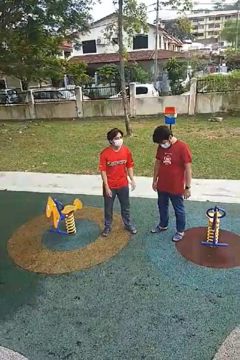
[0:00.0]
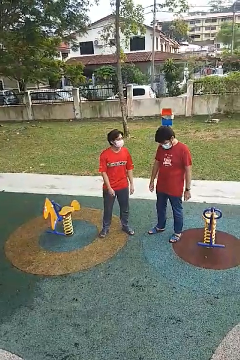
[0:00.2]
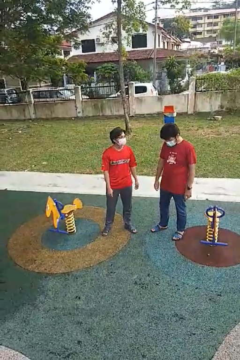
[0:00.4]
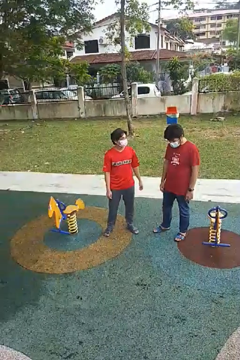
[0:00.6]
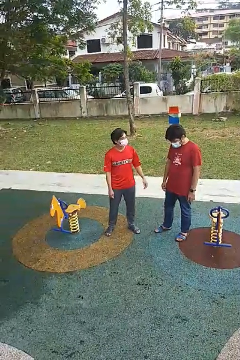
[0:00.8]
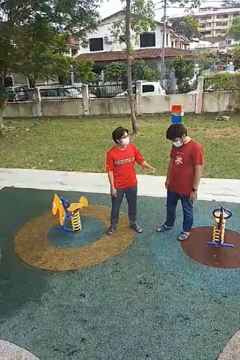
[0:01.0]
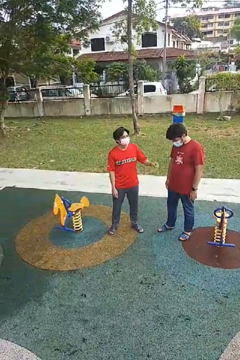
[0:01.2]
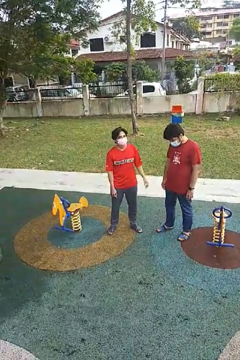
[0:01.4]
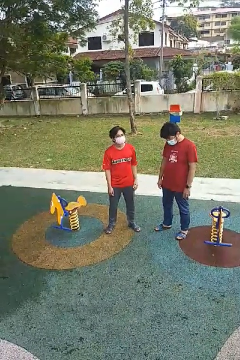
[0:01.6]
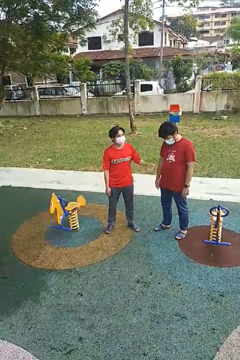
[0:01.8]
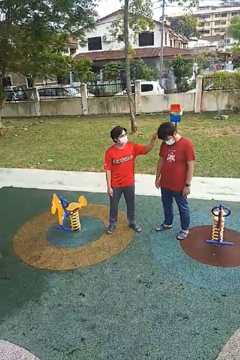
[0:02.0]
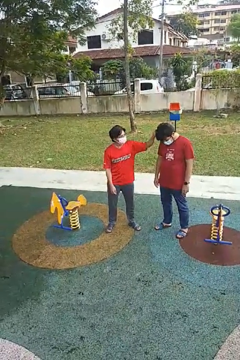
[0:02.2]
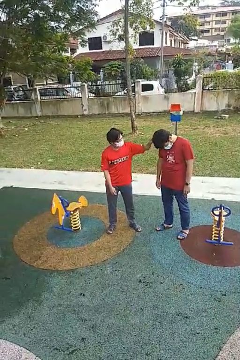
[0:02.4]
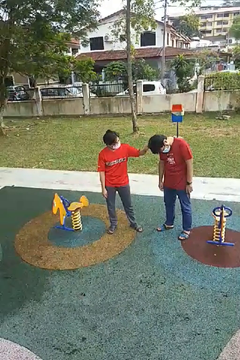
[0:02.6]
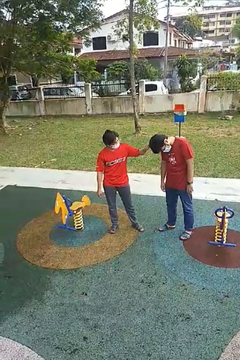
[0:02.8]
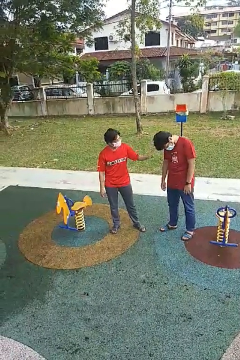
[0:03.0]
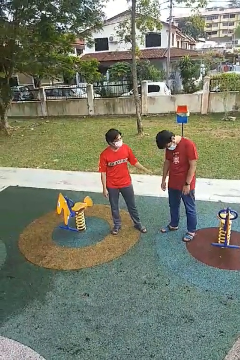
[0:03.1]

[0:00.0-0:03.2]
person grabs person by hair

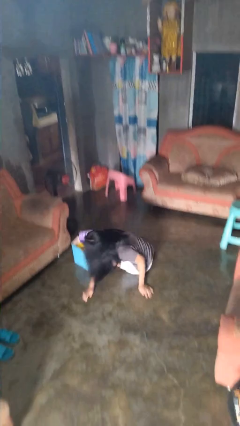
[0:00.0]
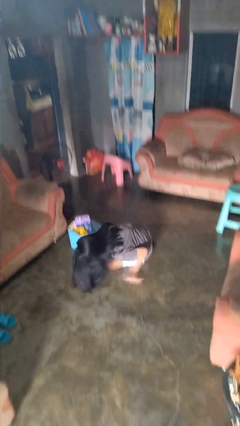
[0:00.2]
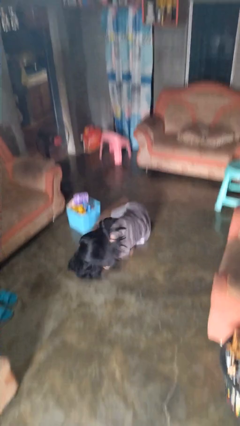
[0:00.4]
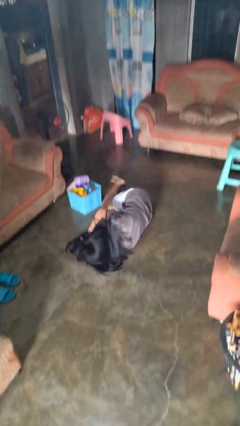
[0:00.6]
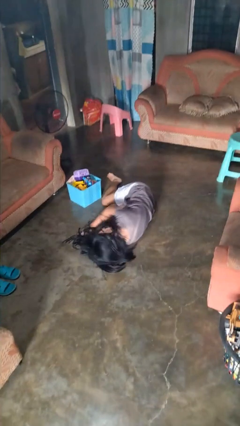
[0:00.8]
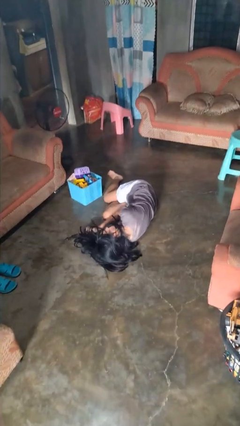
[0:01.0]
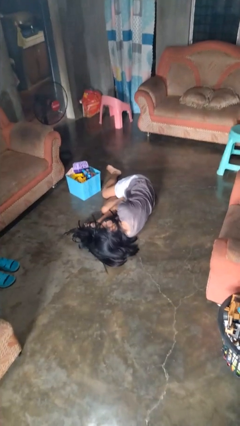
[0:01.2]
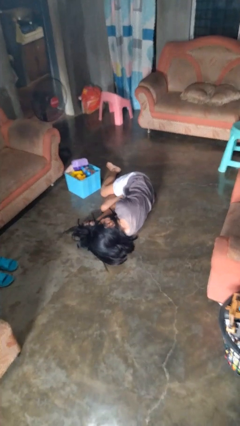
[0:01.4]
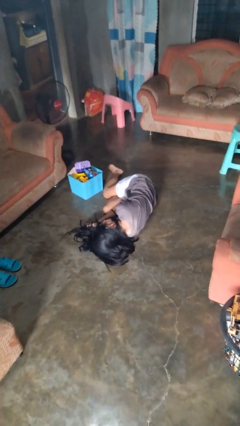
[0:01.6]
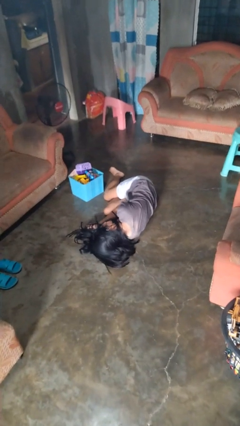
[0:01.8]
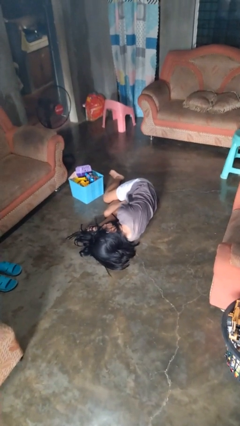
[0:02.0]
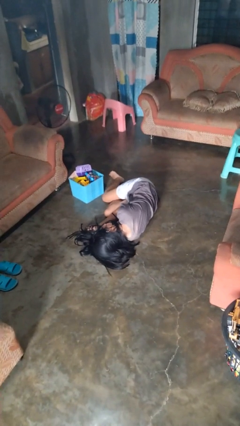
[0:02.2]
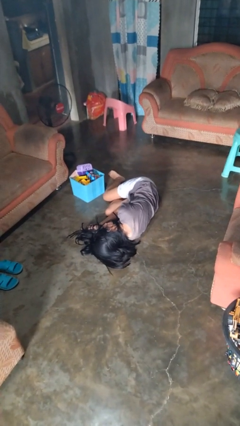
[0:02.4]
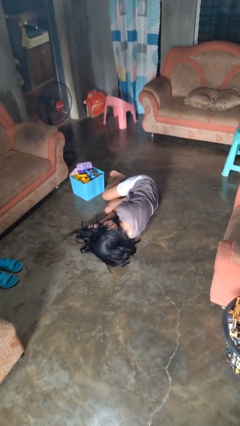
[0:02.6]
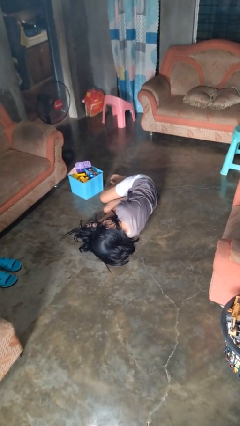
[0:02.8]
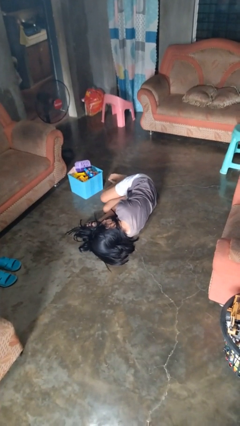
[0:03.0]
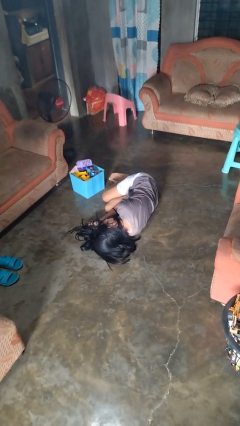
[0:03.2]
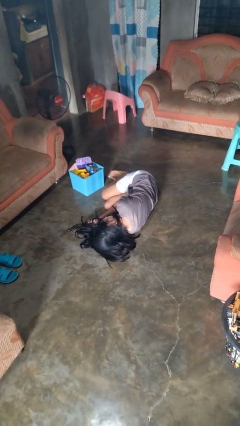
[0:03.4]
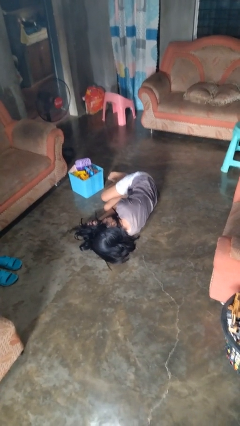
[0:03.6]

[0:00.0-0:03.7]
person lies down on floor

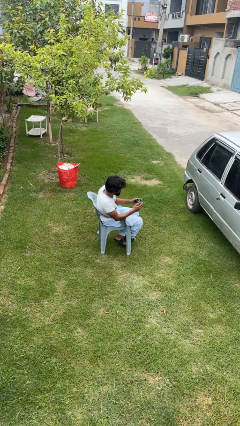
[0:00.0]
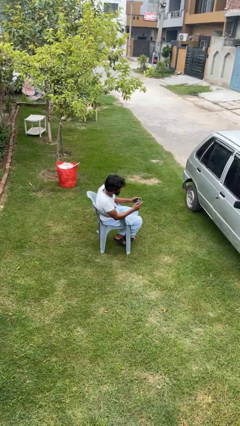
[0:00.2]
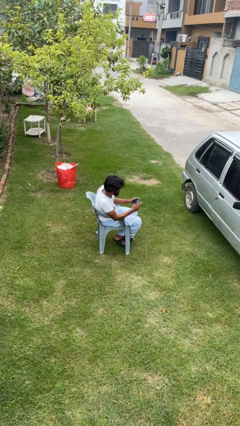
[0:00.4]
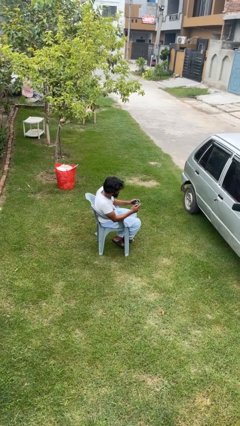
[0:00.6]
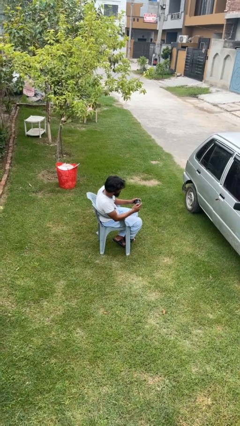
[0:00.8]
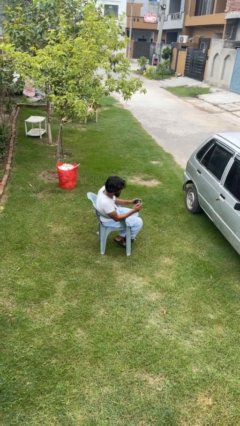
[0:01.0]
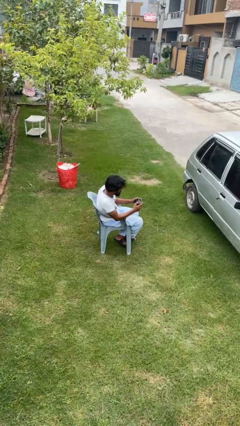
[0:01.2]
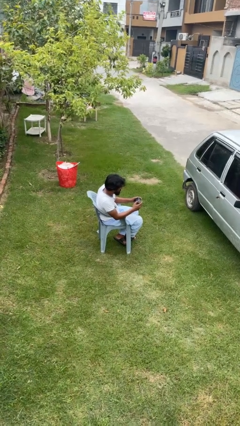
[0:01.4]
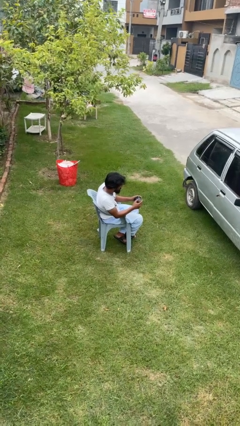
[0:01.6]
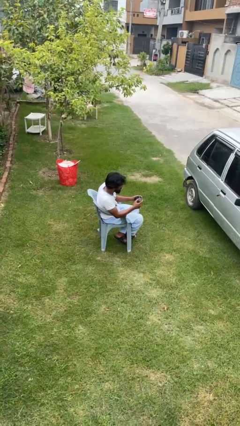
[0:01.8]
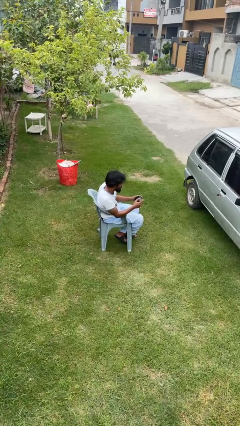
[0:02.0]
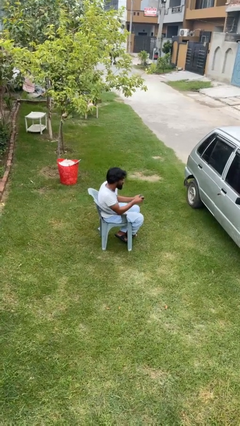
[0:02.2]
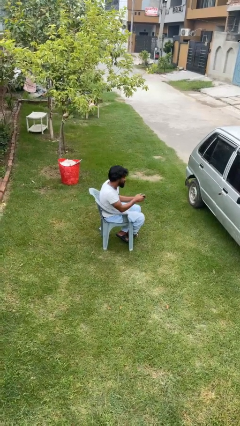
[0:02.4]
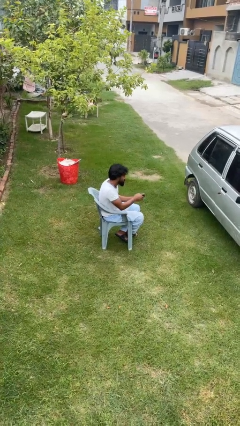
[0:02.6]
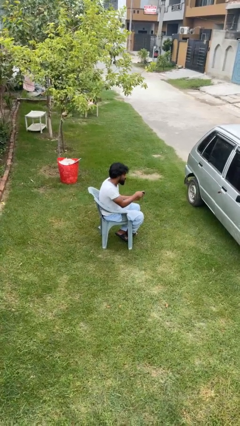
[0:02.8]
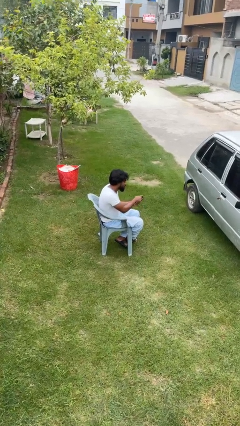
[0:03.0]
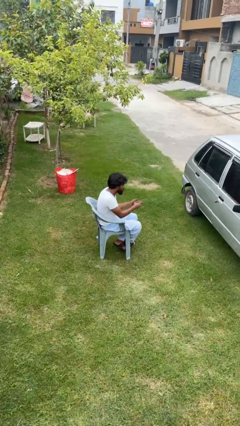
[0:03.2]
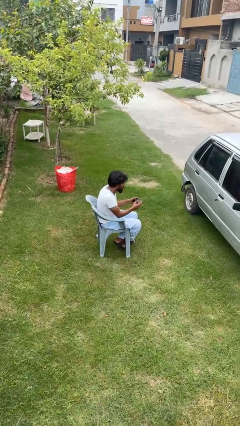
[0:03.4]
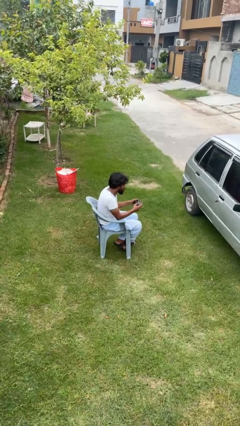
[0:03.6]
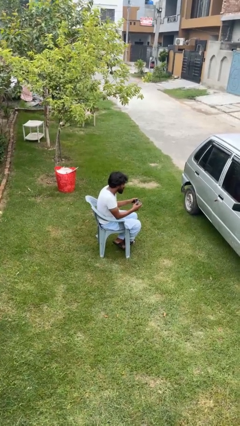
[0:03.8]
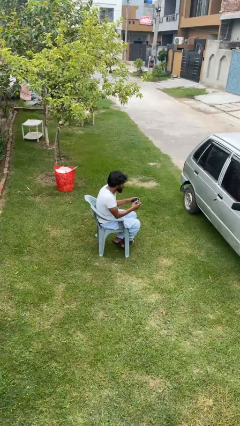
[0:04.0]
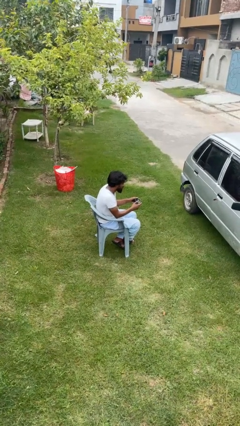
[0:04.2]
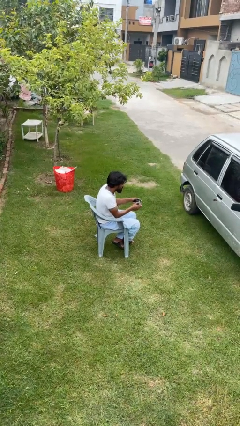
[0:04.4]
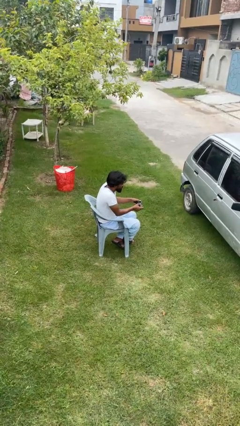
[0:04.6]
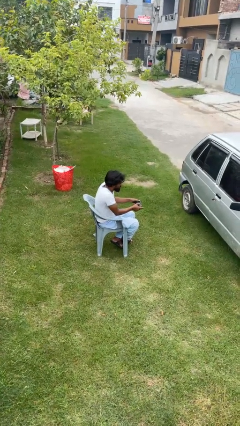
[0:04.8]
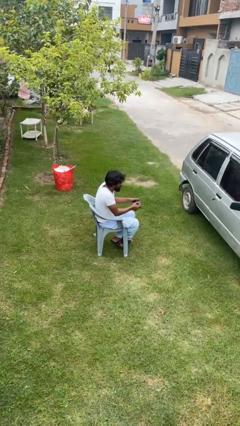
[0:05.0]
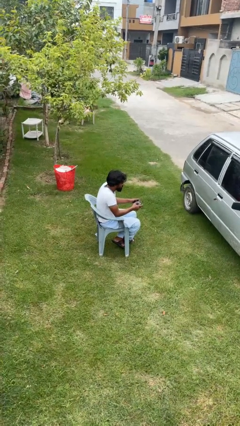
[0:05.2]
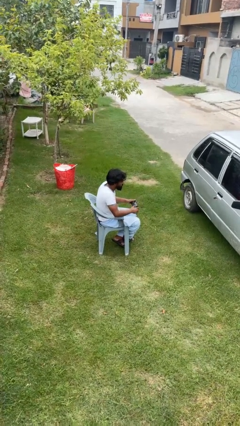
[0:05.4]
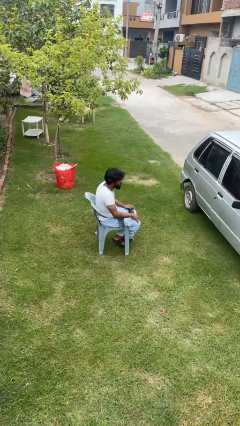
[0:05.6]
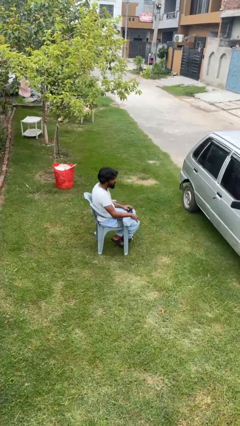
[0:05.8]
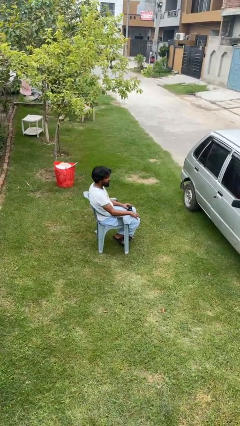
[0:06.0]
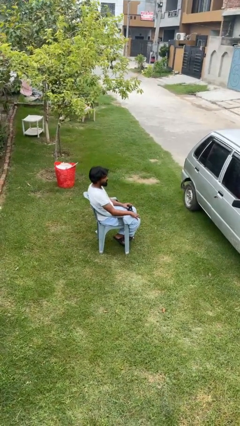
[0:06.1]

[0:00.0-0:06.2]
person interacts with handheld game

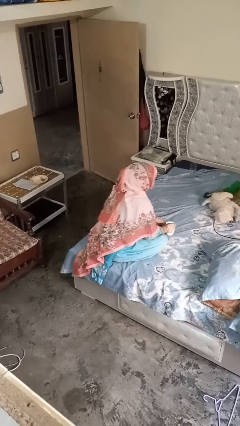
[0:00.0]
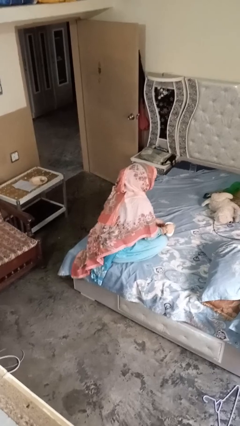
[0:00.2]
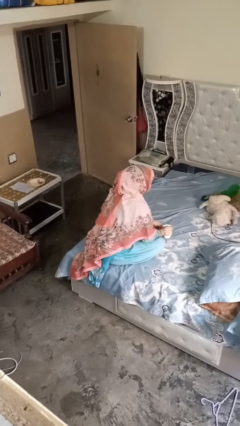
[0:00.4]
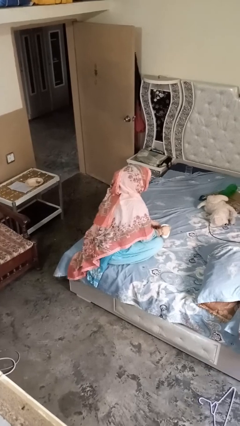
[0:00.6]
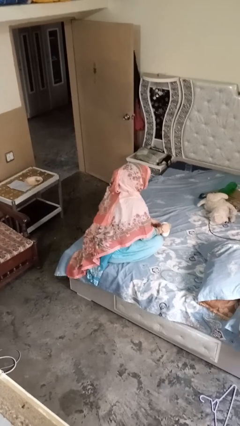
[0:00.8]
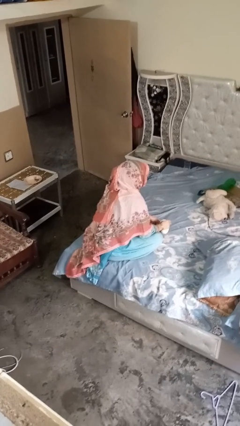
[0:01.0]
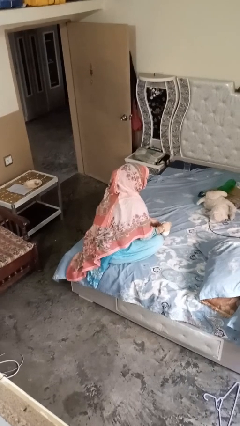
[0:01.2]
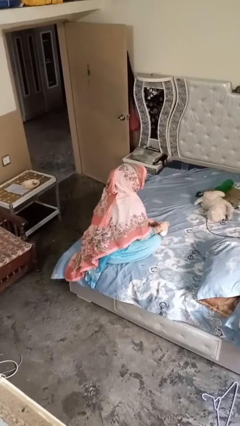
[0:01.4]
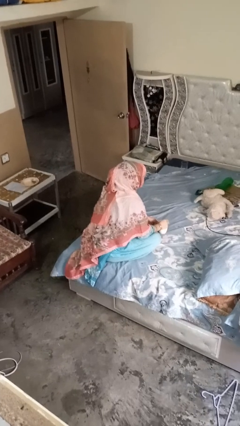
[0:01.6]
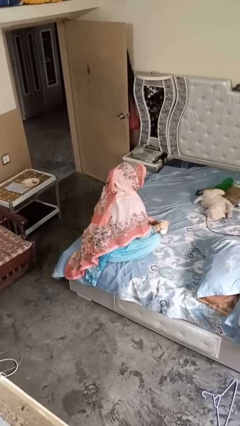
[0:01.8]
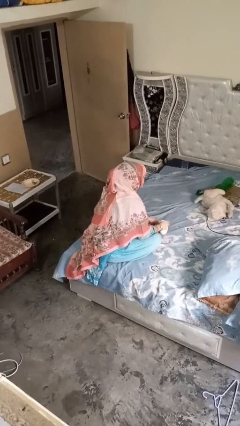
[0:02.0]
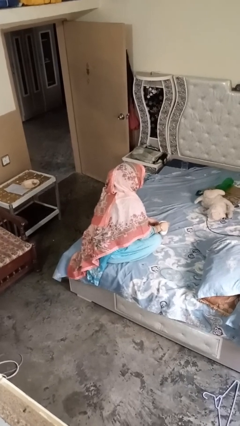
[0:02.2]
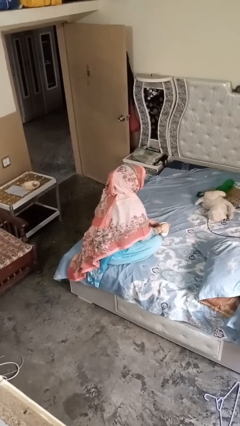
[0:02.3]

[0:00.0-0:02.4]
person stirs mug

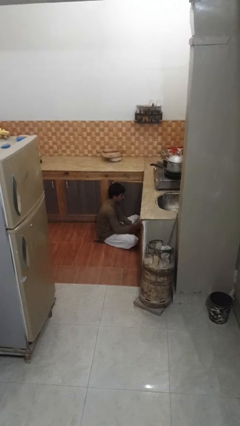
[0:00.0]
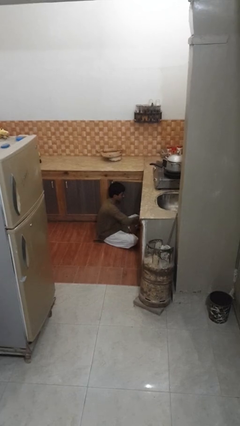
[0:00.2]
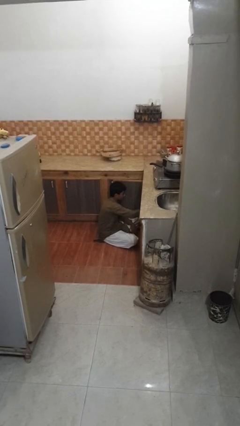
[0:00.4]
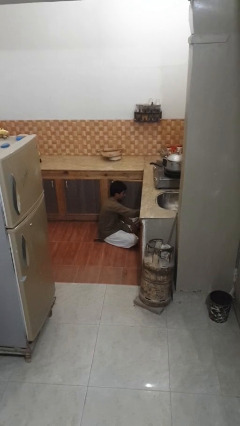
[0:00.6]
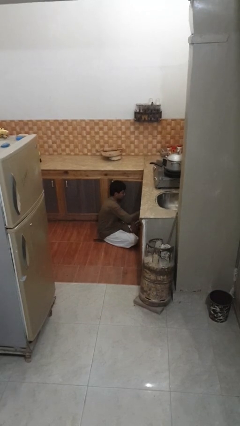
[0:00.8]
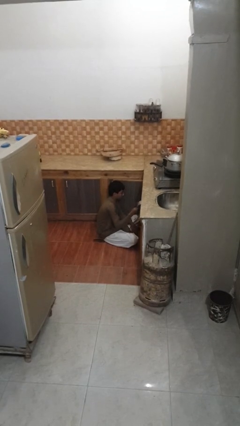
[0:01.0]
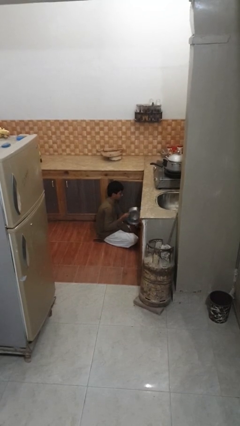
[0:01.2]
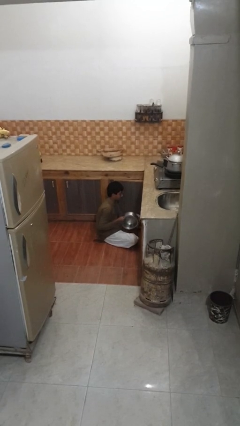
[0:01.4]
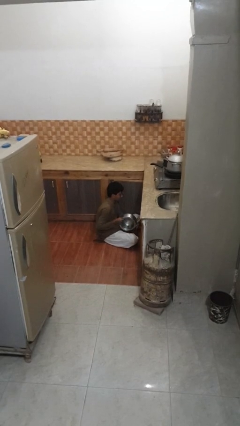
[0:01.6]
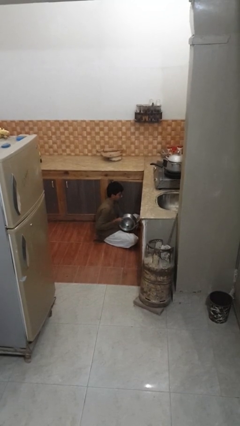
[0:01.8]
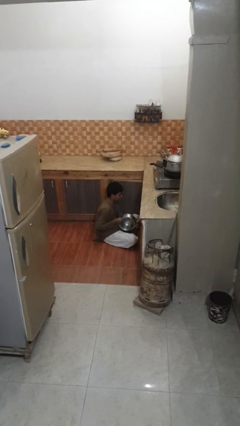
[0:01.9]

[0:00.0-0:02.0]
person takes object from kitchen drawer

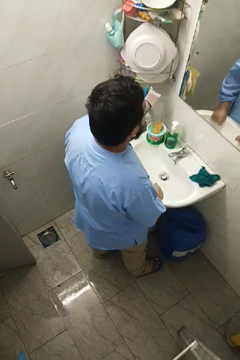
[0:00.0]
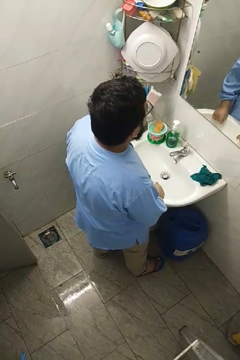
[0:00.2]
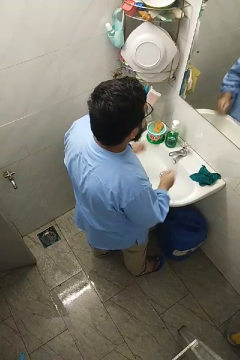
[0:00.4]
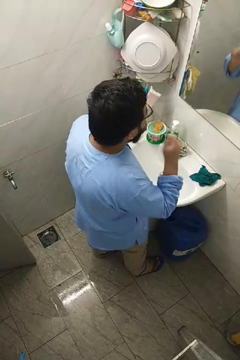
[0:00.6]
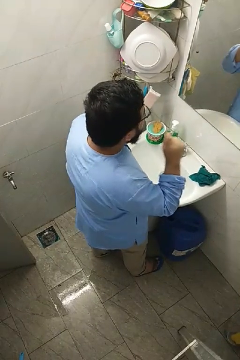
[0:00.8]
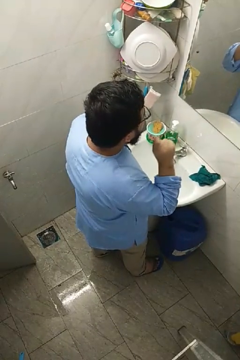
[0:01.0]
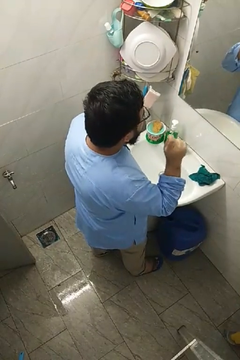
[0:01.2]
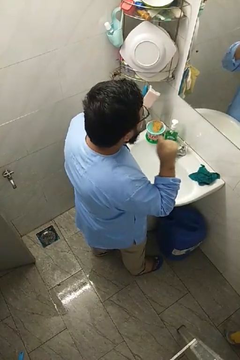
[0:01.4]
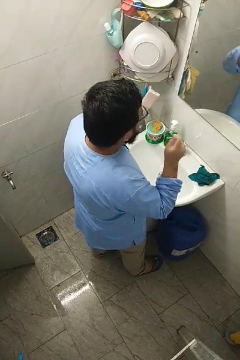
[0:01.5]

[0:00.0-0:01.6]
person flosses
